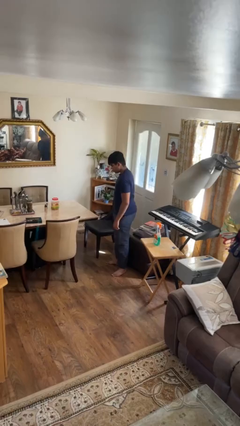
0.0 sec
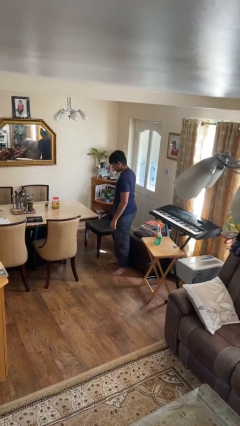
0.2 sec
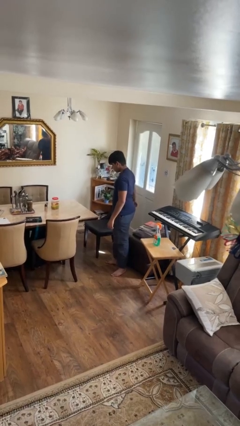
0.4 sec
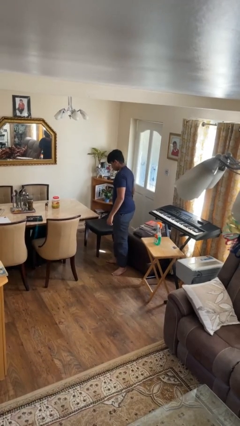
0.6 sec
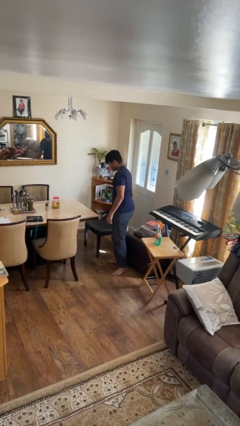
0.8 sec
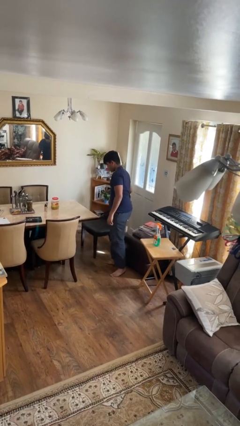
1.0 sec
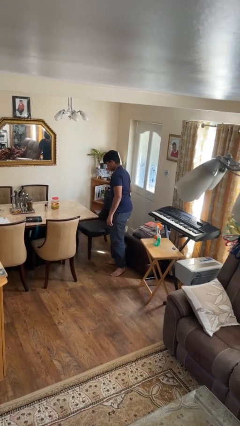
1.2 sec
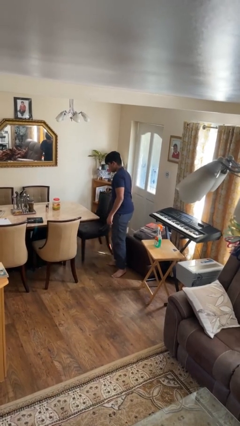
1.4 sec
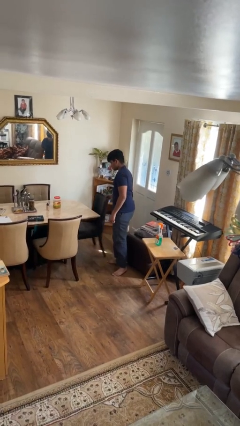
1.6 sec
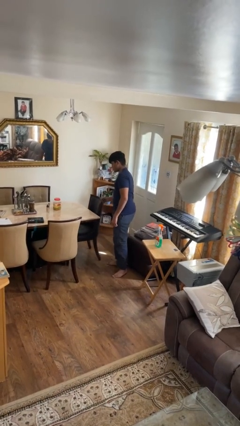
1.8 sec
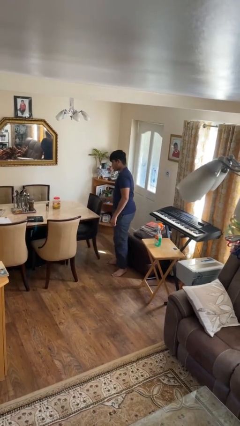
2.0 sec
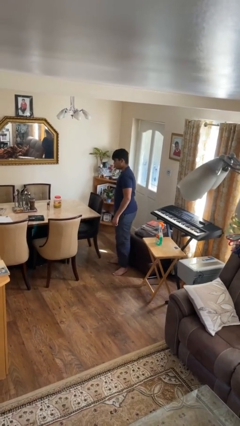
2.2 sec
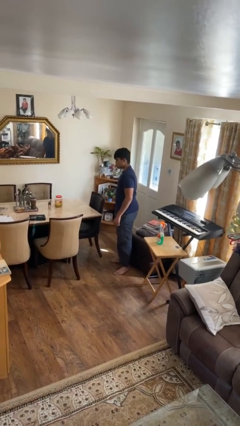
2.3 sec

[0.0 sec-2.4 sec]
person pushes in chair

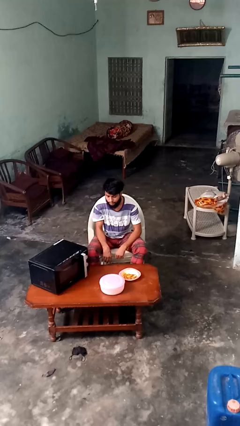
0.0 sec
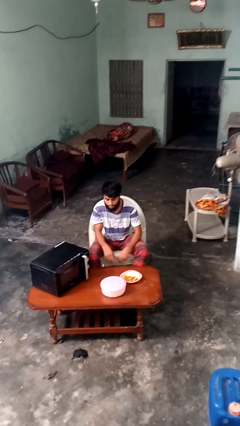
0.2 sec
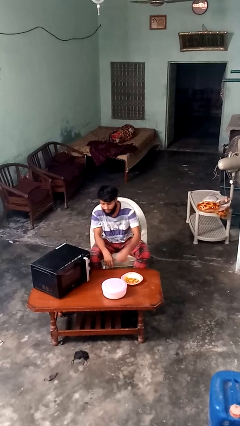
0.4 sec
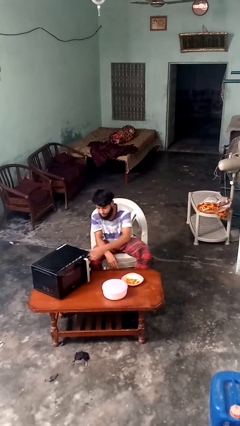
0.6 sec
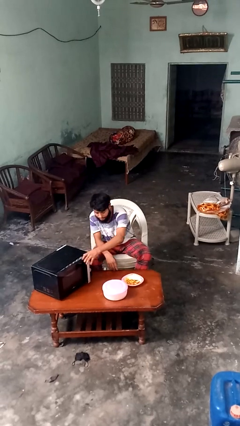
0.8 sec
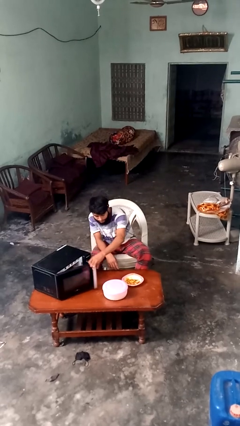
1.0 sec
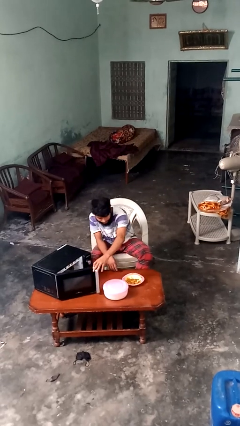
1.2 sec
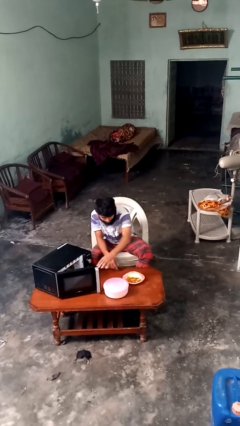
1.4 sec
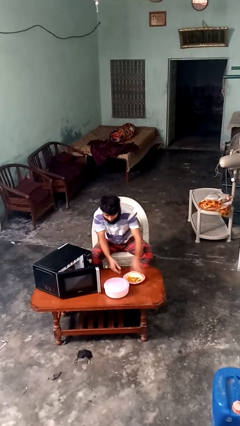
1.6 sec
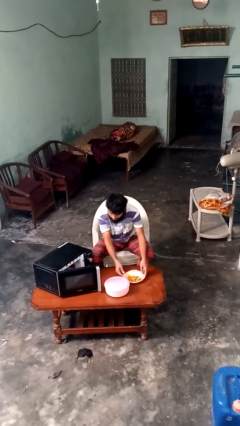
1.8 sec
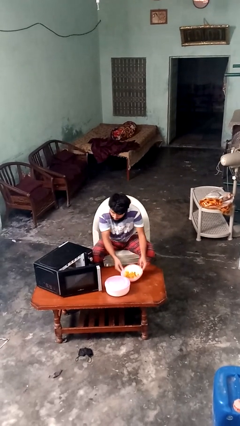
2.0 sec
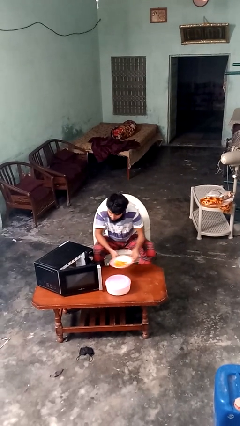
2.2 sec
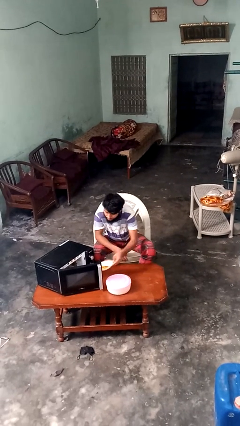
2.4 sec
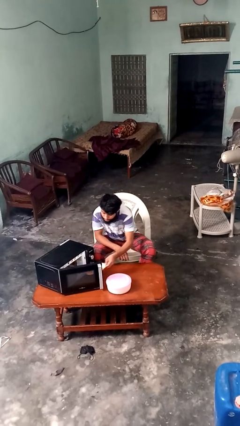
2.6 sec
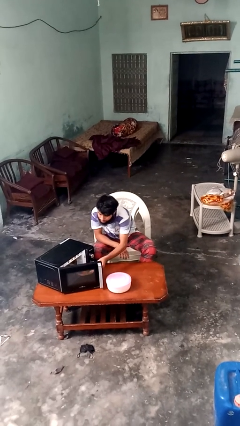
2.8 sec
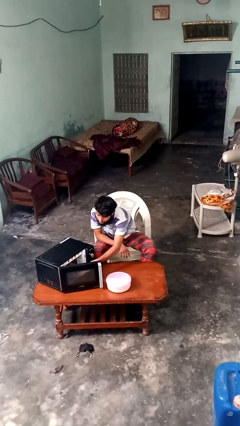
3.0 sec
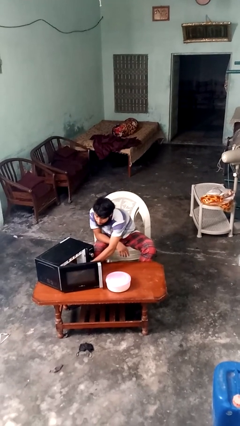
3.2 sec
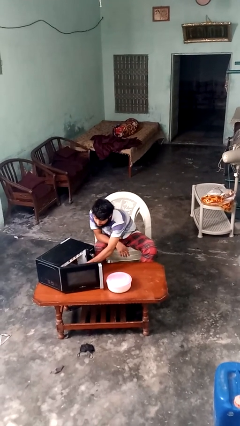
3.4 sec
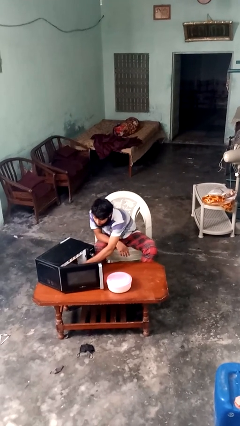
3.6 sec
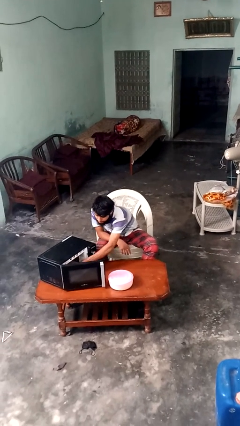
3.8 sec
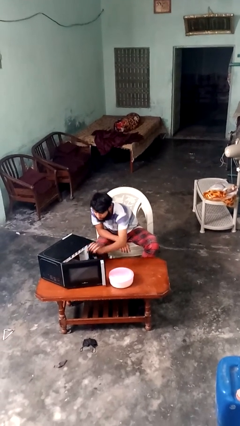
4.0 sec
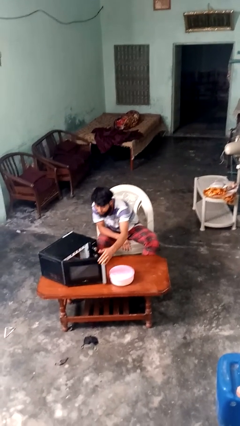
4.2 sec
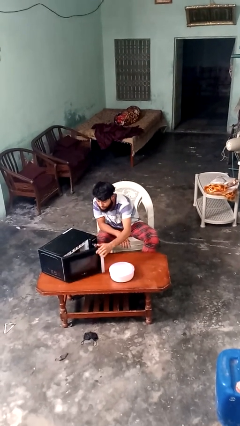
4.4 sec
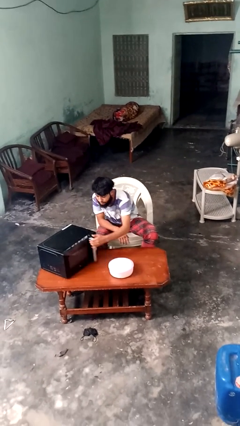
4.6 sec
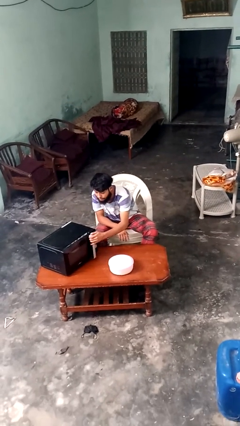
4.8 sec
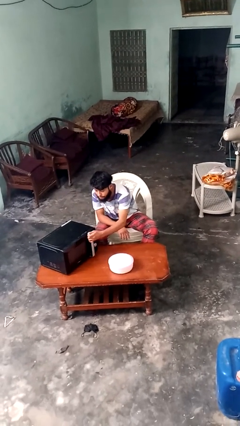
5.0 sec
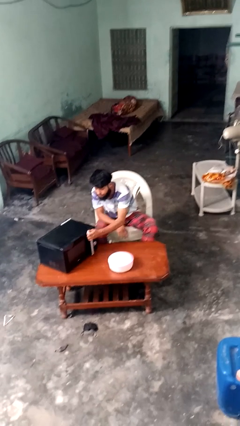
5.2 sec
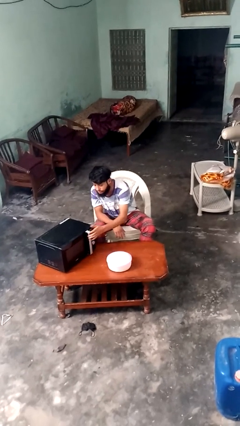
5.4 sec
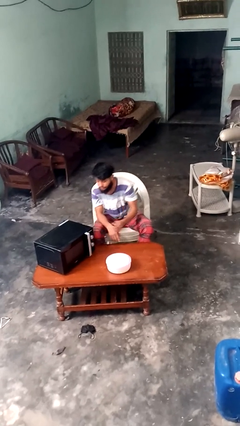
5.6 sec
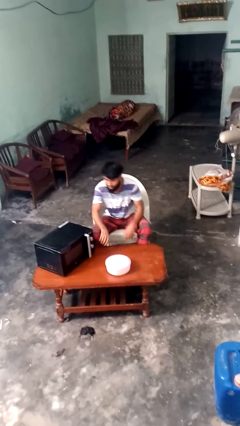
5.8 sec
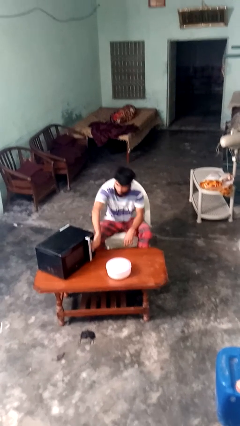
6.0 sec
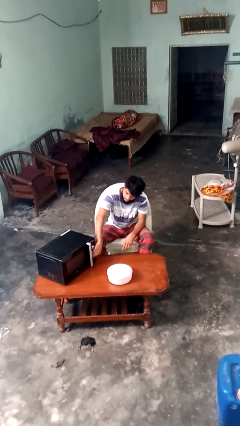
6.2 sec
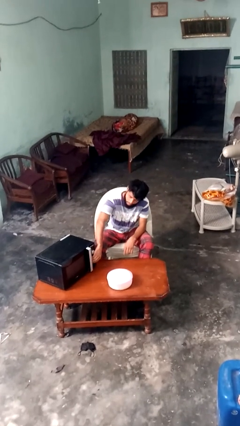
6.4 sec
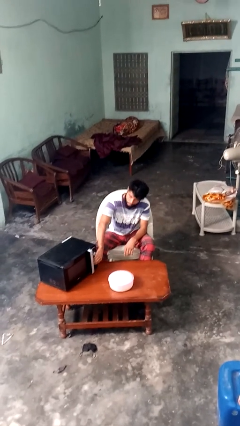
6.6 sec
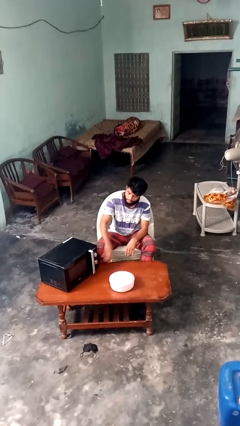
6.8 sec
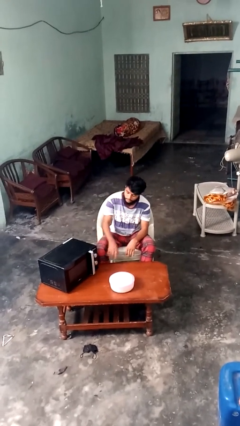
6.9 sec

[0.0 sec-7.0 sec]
person puts object into microwave

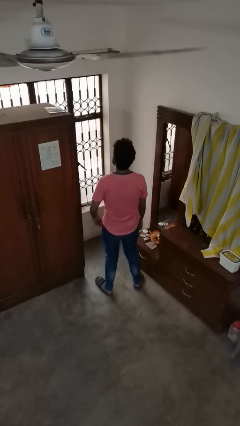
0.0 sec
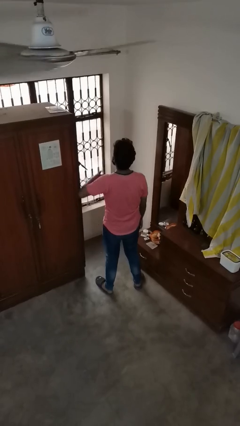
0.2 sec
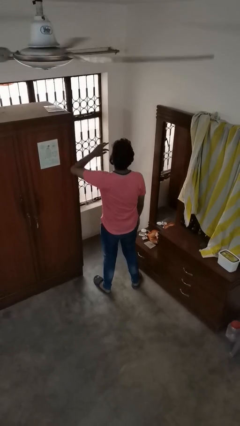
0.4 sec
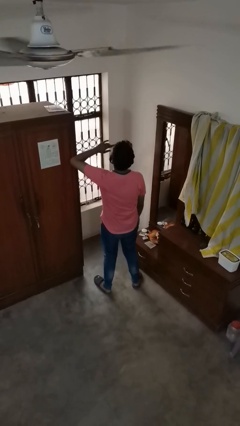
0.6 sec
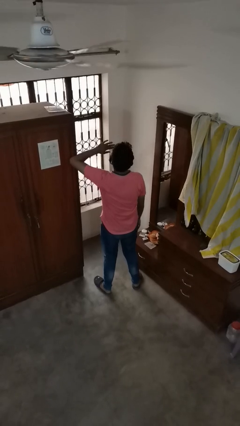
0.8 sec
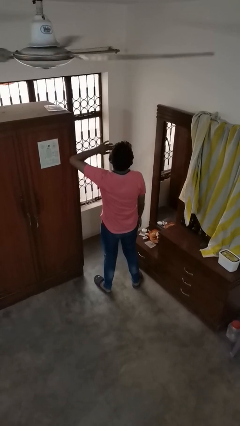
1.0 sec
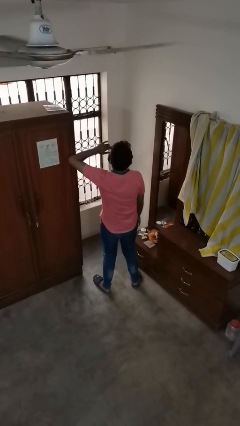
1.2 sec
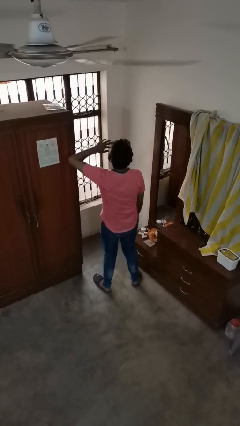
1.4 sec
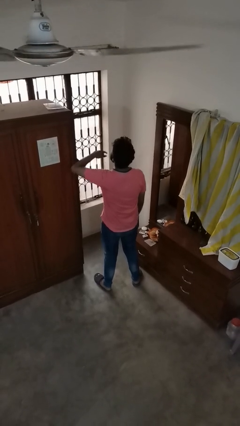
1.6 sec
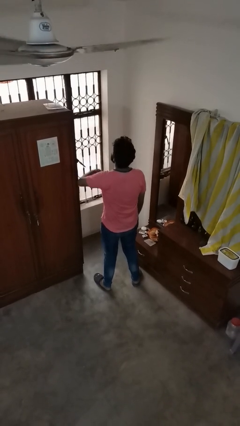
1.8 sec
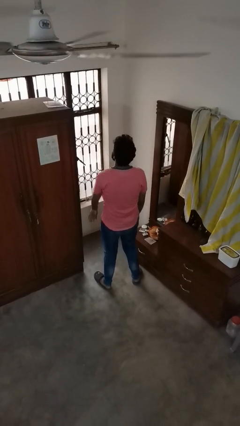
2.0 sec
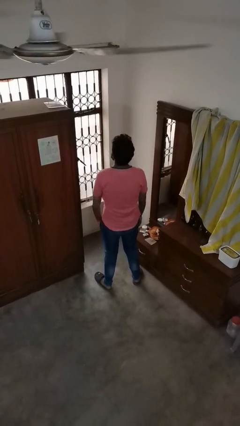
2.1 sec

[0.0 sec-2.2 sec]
person yawns

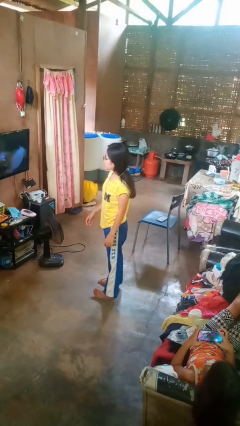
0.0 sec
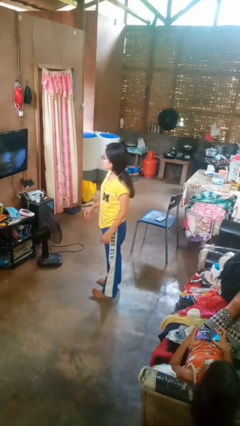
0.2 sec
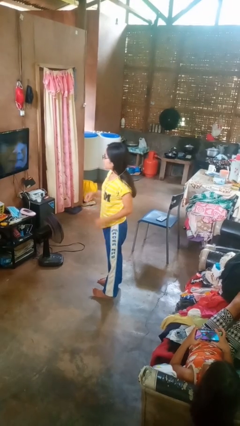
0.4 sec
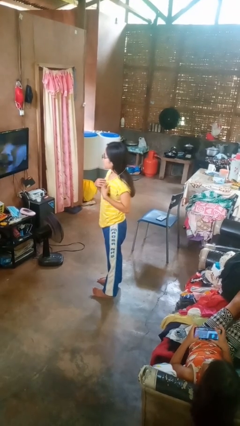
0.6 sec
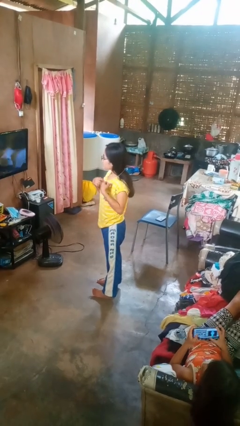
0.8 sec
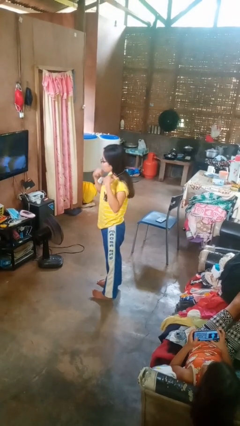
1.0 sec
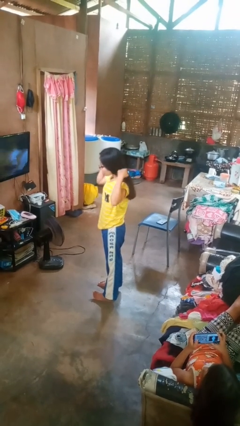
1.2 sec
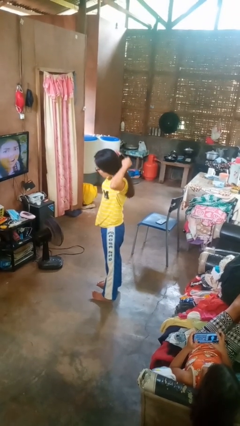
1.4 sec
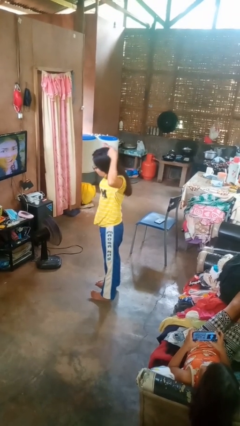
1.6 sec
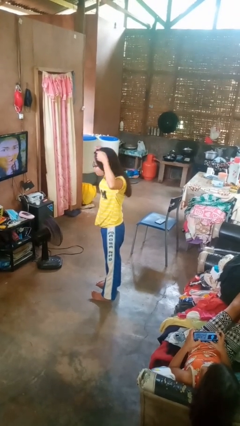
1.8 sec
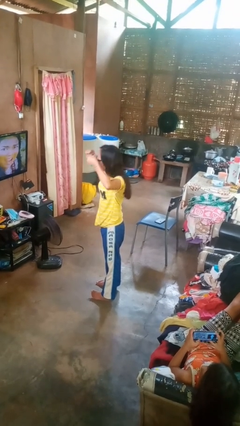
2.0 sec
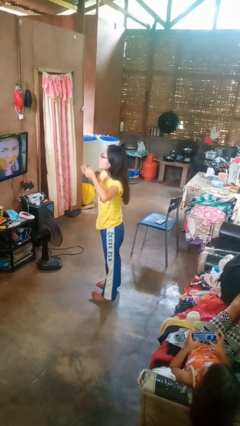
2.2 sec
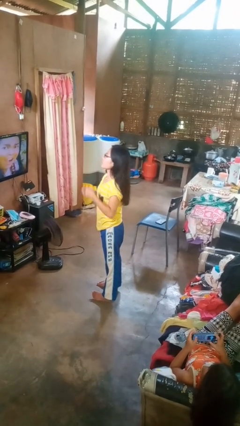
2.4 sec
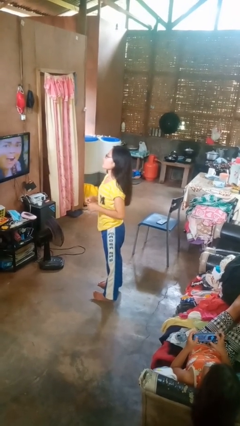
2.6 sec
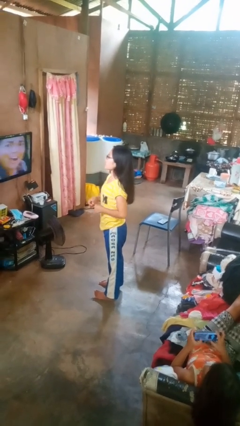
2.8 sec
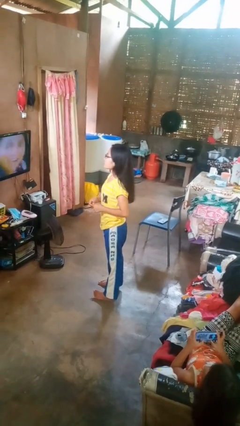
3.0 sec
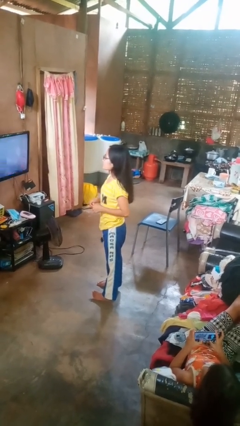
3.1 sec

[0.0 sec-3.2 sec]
person takes off necklace

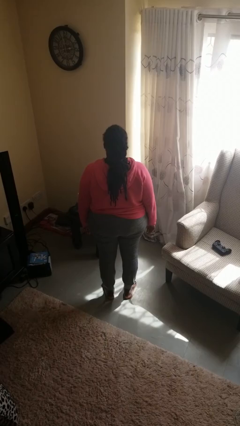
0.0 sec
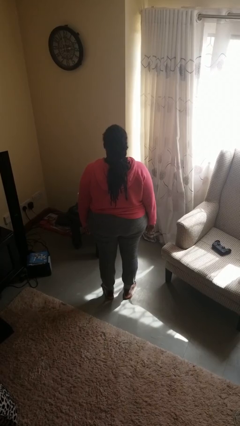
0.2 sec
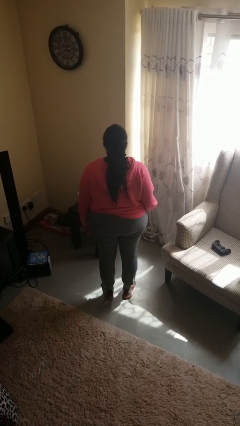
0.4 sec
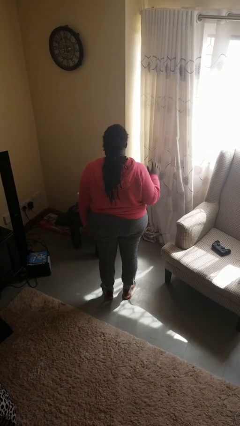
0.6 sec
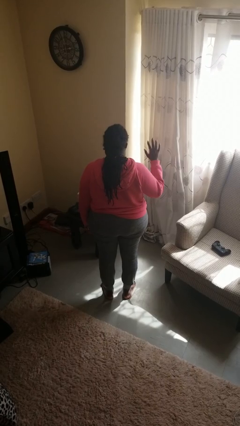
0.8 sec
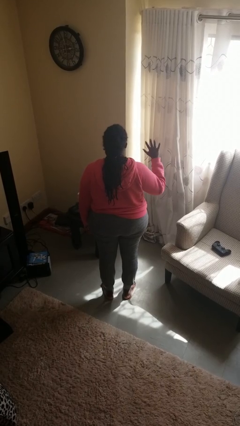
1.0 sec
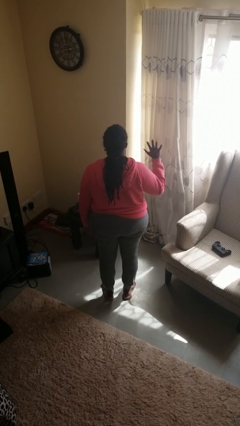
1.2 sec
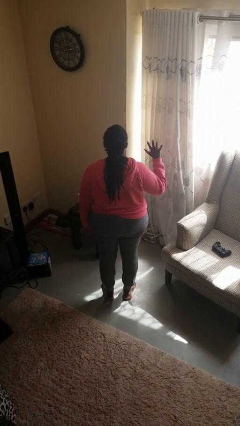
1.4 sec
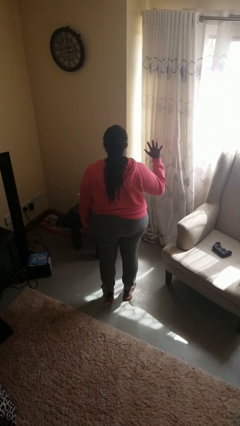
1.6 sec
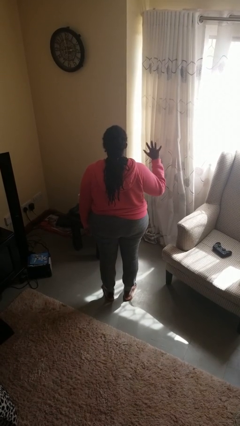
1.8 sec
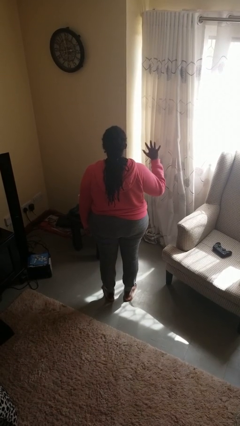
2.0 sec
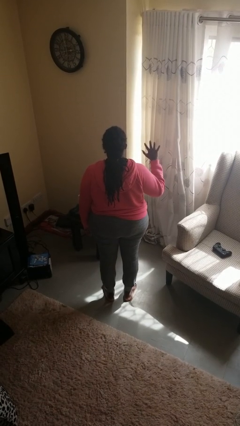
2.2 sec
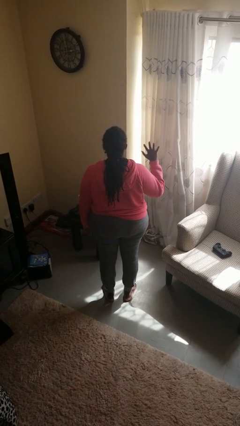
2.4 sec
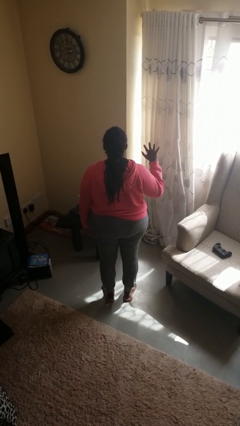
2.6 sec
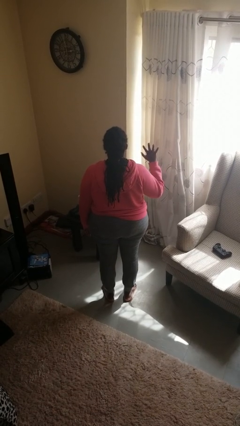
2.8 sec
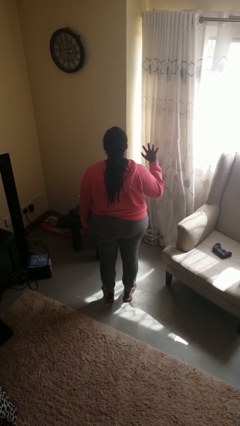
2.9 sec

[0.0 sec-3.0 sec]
person gestures number five
